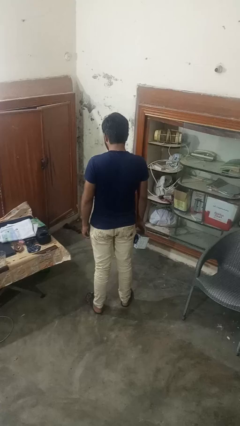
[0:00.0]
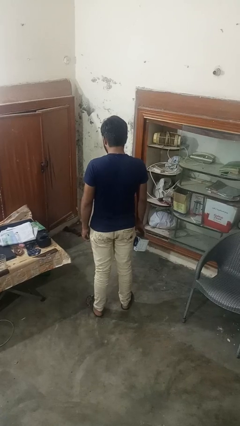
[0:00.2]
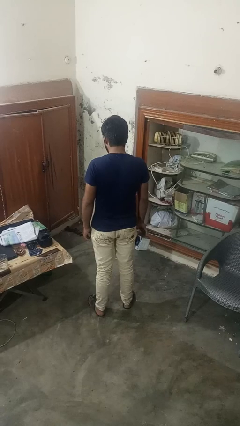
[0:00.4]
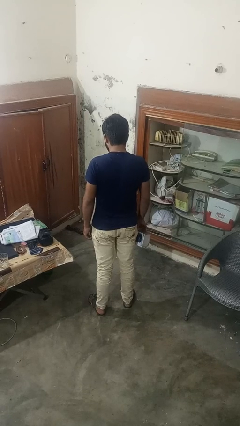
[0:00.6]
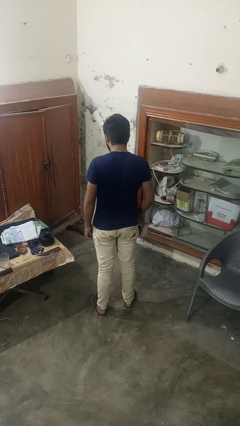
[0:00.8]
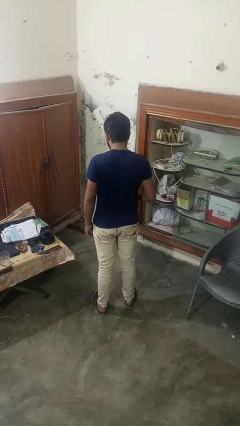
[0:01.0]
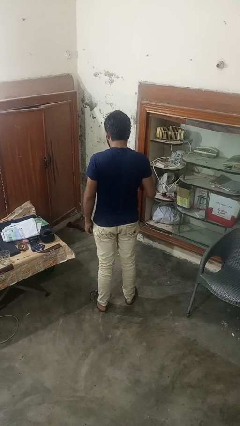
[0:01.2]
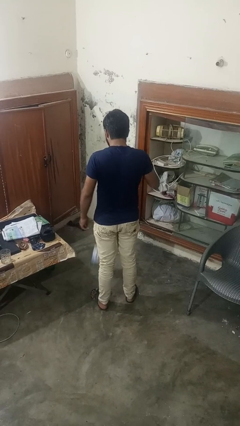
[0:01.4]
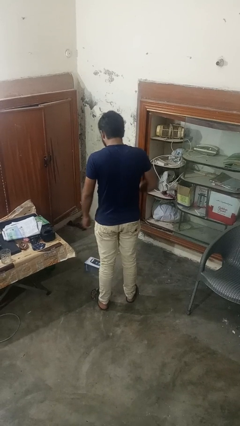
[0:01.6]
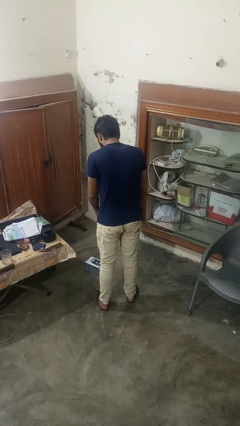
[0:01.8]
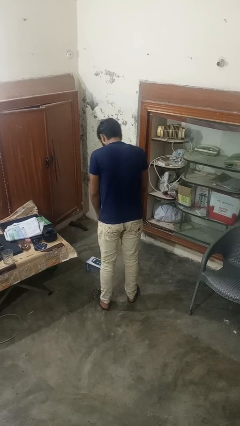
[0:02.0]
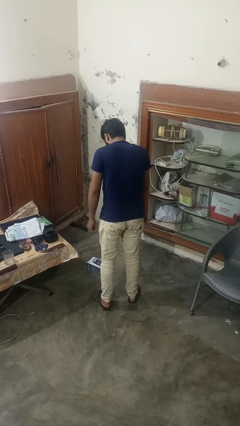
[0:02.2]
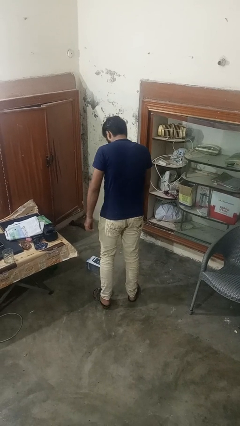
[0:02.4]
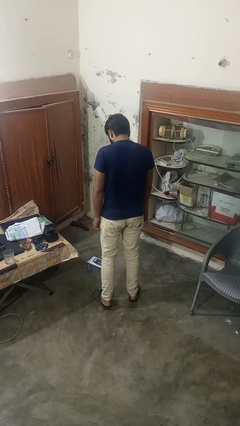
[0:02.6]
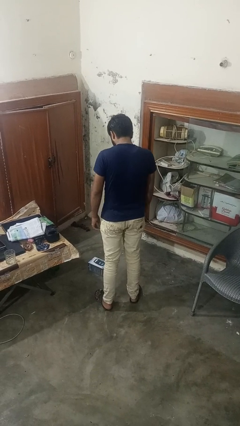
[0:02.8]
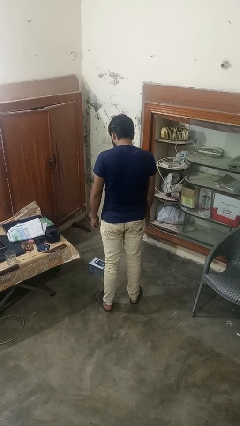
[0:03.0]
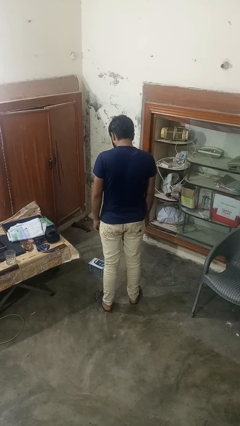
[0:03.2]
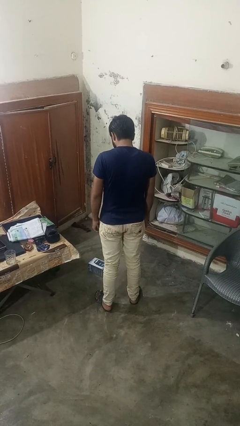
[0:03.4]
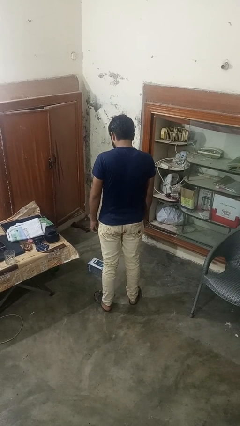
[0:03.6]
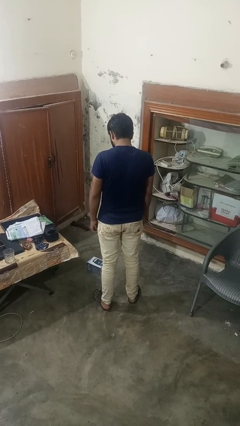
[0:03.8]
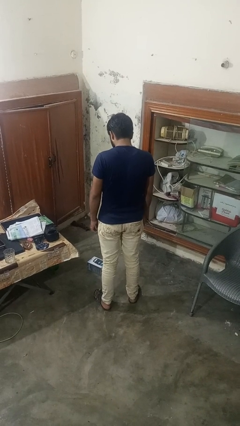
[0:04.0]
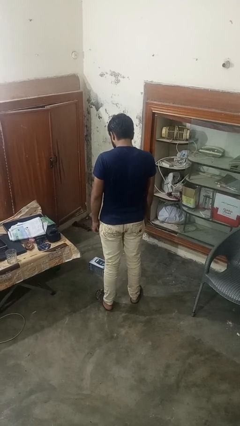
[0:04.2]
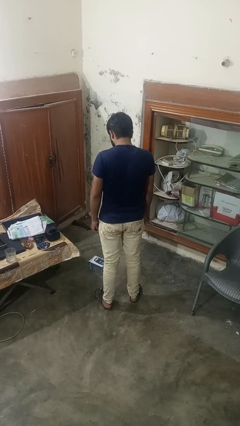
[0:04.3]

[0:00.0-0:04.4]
person drops object

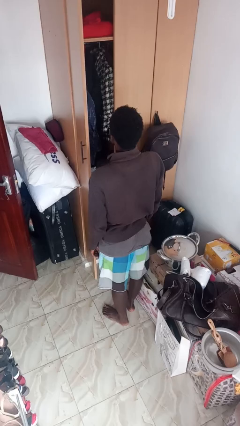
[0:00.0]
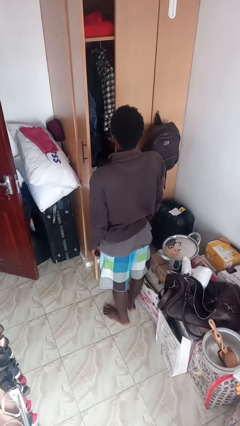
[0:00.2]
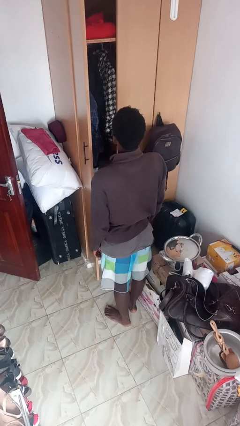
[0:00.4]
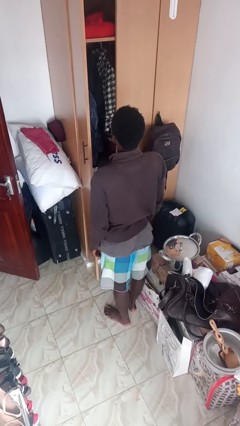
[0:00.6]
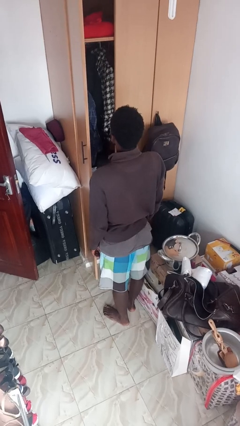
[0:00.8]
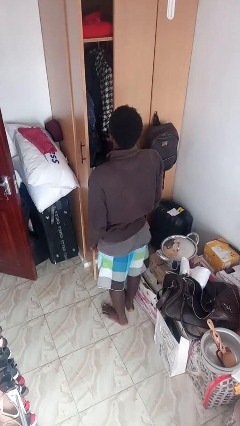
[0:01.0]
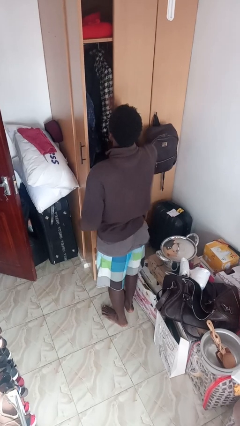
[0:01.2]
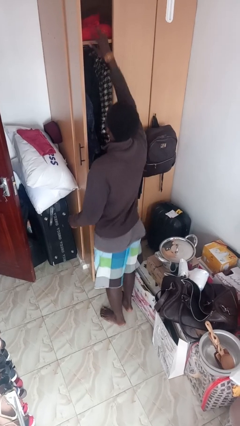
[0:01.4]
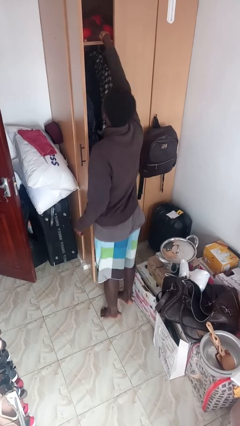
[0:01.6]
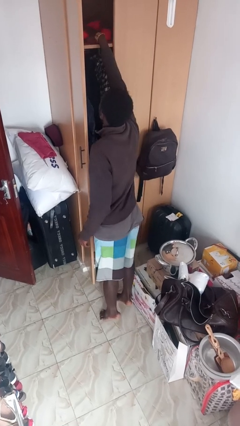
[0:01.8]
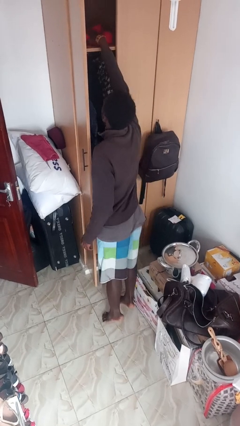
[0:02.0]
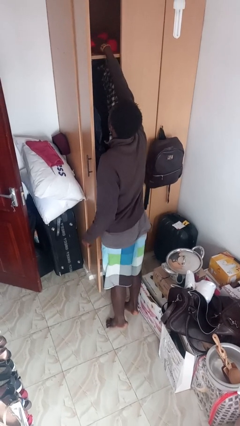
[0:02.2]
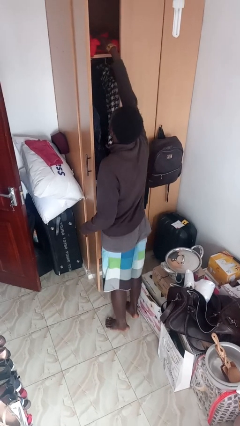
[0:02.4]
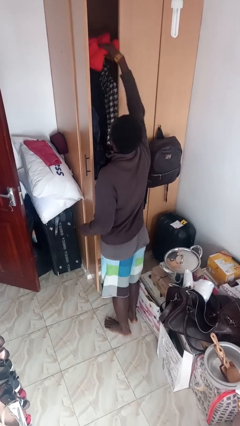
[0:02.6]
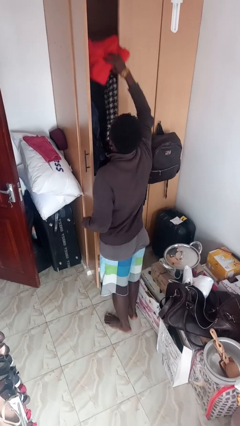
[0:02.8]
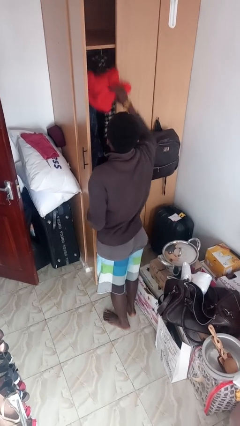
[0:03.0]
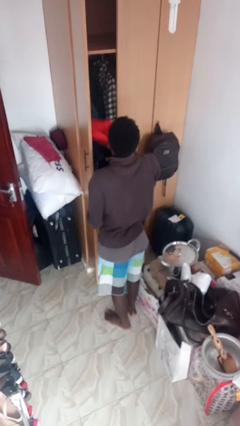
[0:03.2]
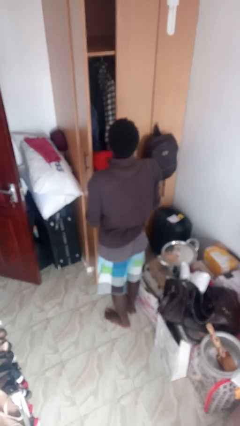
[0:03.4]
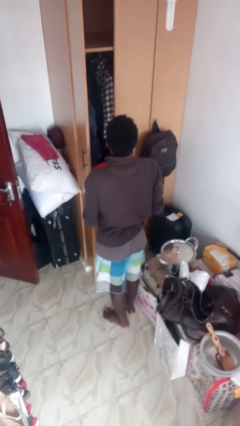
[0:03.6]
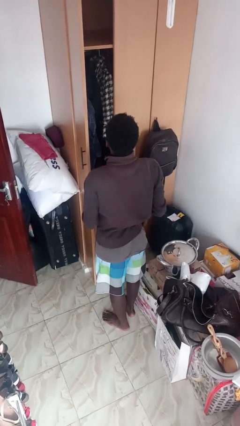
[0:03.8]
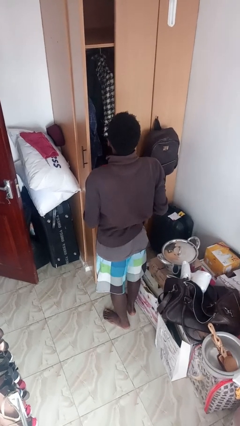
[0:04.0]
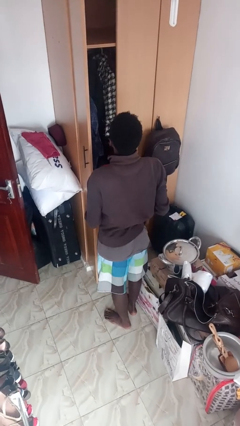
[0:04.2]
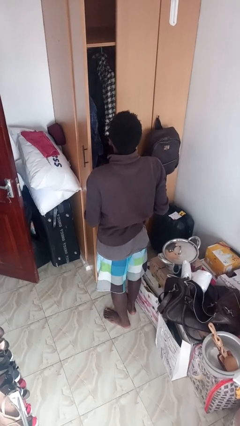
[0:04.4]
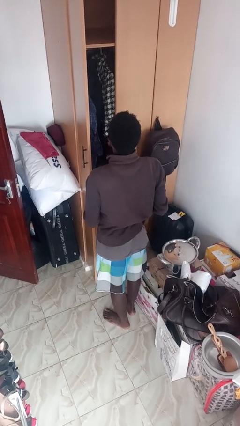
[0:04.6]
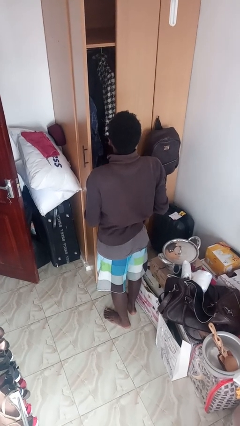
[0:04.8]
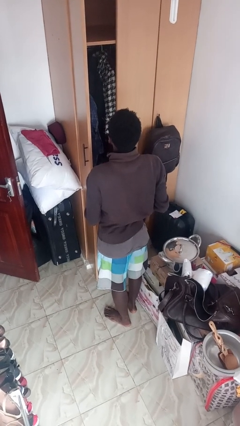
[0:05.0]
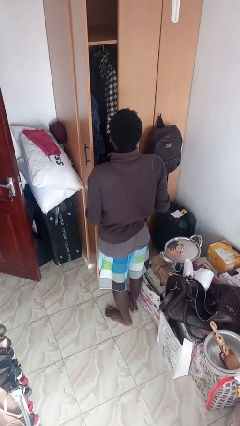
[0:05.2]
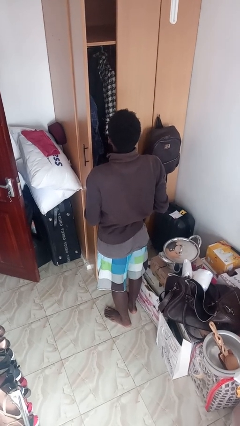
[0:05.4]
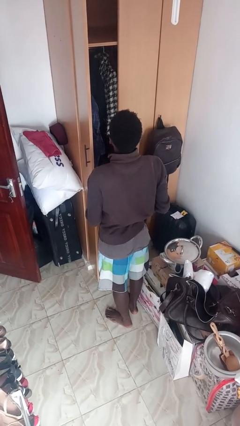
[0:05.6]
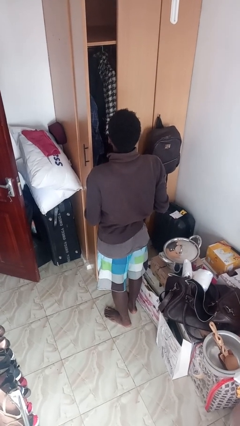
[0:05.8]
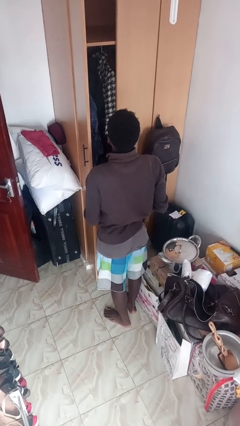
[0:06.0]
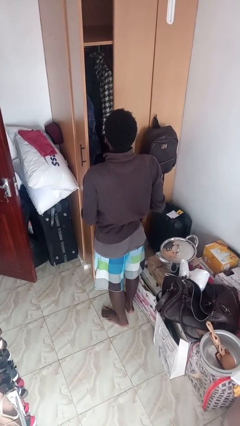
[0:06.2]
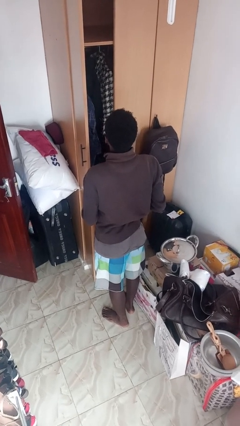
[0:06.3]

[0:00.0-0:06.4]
person picks up object from shelf

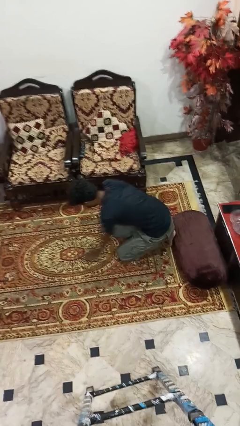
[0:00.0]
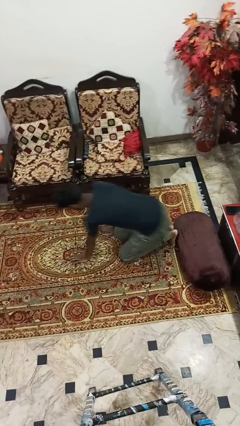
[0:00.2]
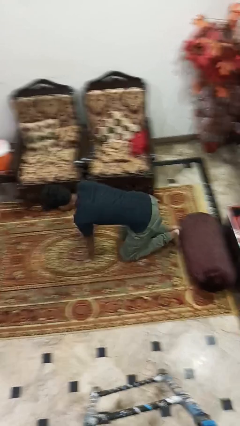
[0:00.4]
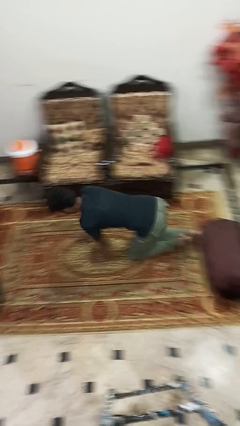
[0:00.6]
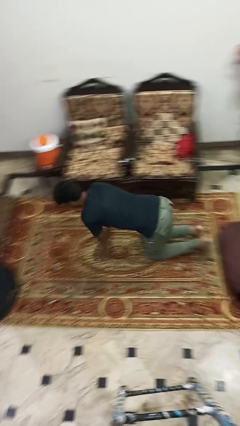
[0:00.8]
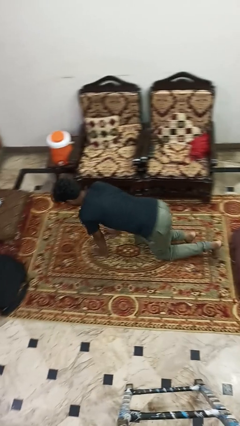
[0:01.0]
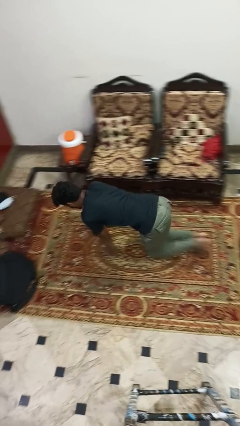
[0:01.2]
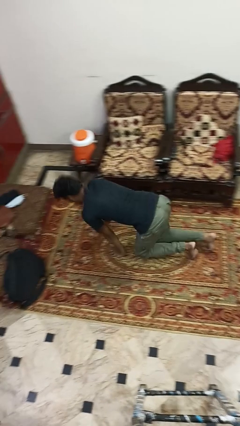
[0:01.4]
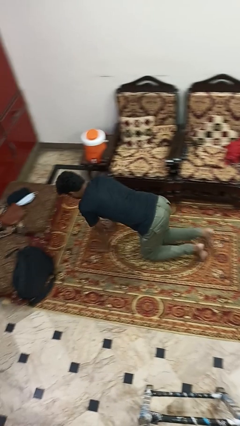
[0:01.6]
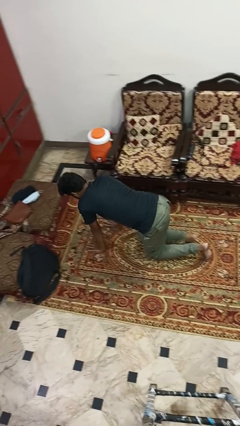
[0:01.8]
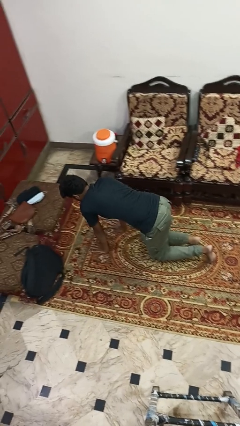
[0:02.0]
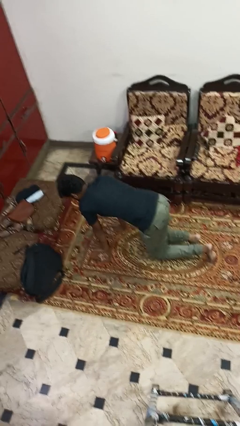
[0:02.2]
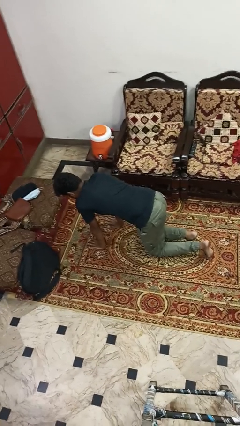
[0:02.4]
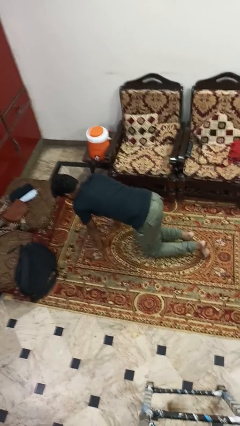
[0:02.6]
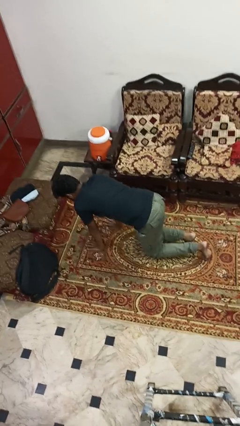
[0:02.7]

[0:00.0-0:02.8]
person crawls

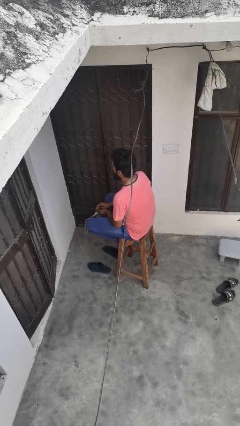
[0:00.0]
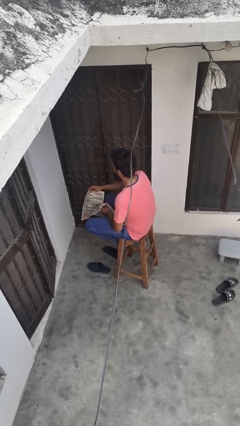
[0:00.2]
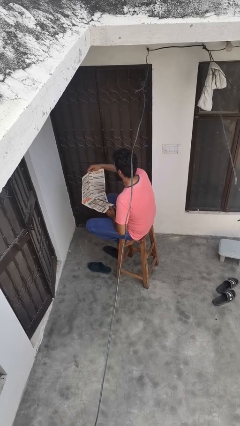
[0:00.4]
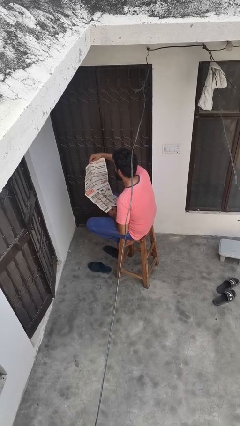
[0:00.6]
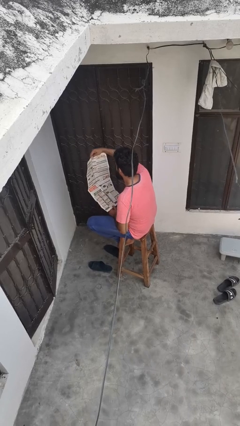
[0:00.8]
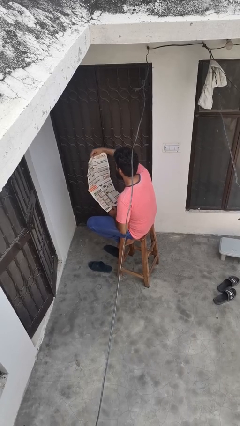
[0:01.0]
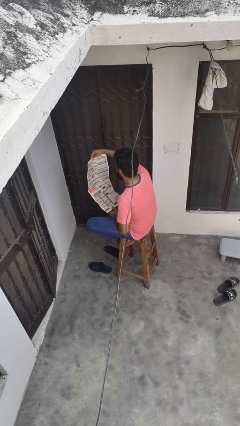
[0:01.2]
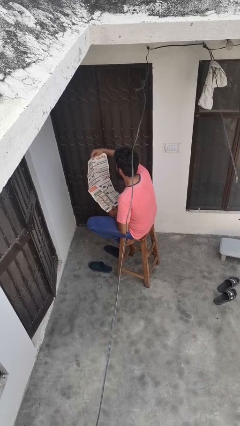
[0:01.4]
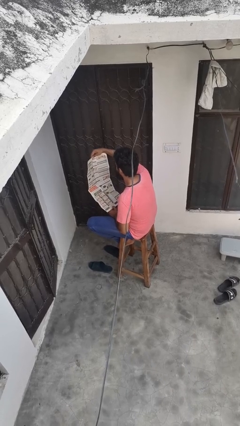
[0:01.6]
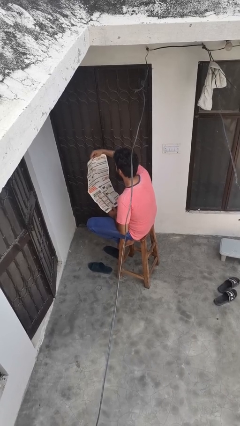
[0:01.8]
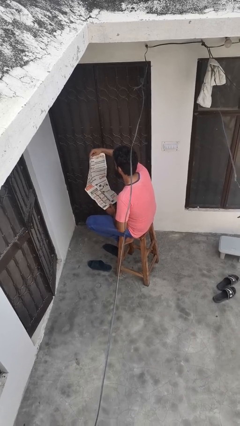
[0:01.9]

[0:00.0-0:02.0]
person reads newspaper

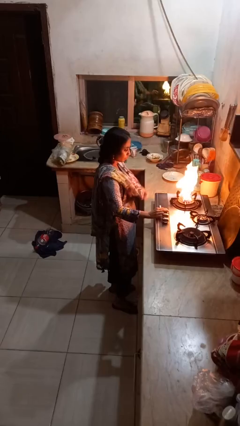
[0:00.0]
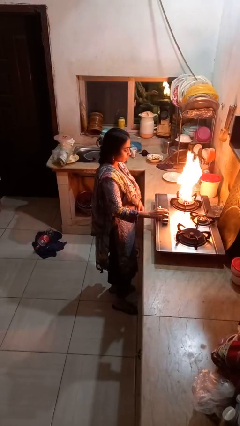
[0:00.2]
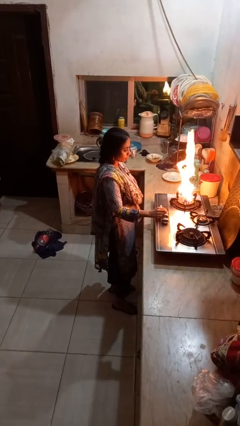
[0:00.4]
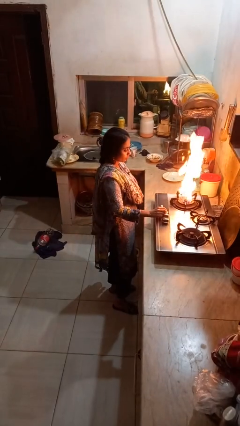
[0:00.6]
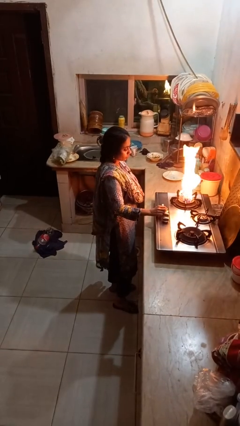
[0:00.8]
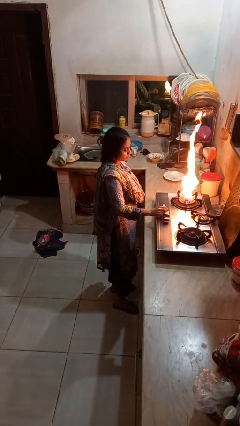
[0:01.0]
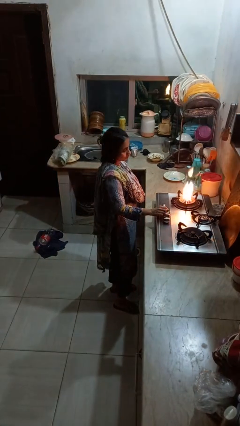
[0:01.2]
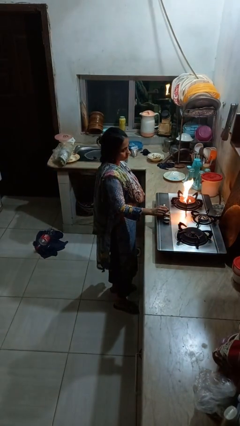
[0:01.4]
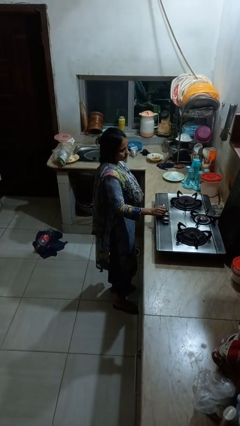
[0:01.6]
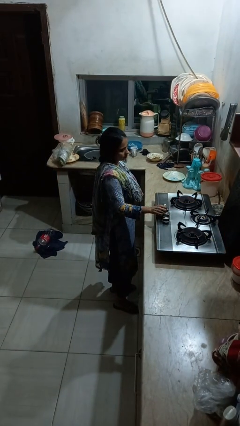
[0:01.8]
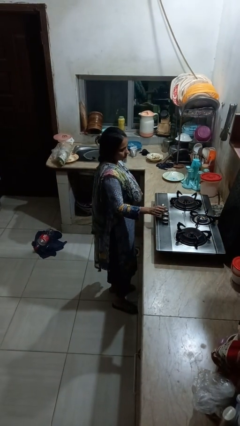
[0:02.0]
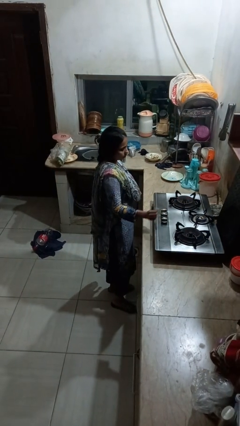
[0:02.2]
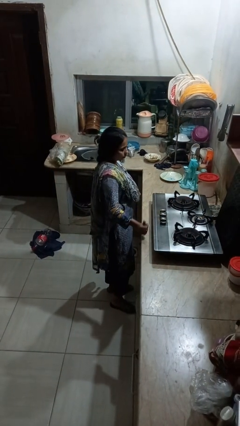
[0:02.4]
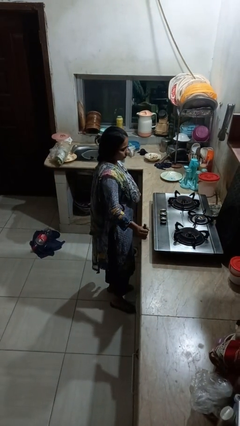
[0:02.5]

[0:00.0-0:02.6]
person turns off stovetop
